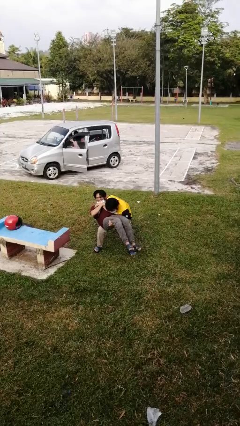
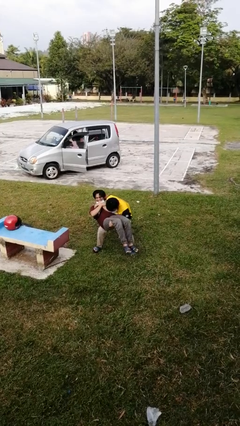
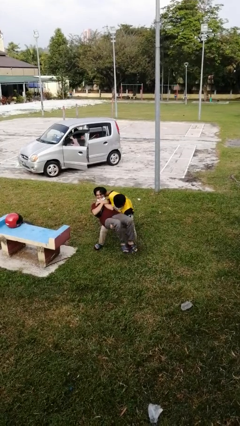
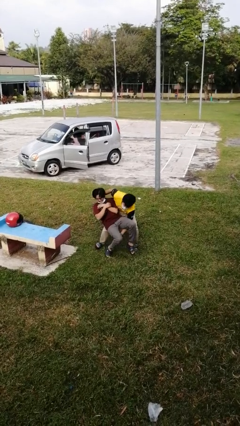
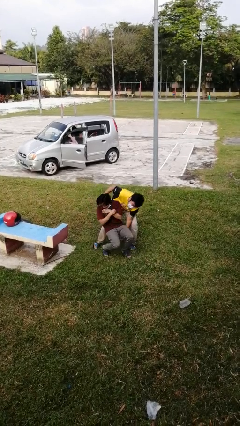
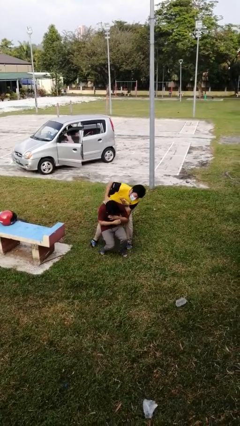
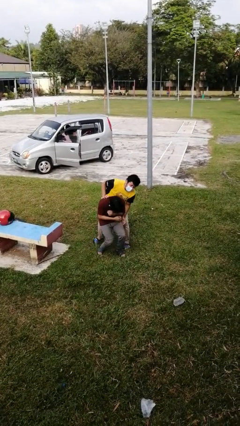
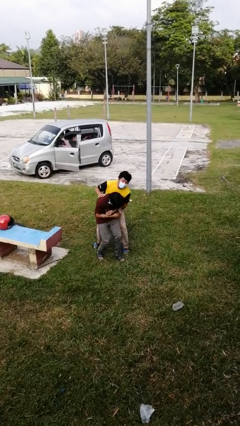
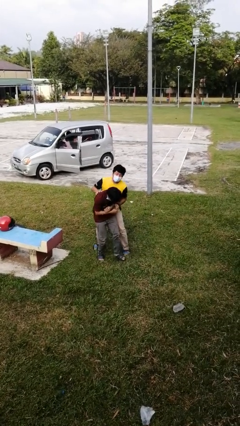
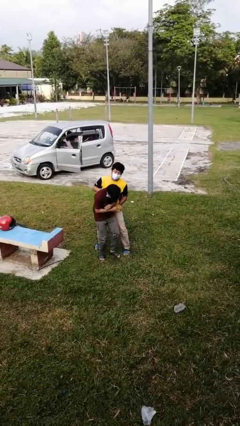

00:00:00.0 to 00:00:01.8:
person puts down person

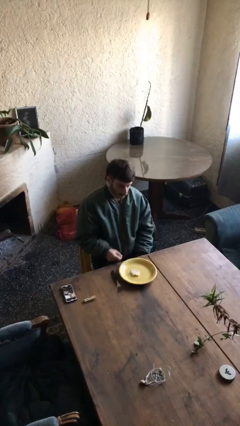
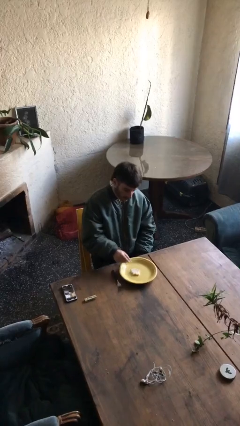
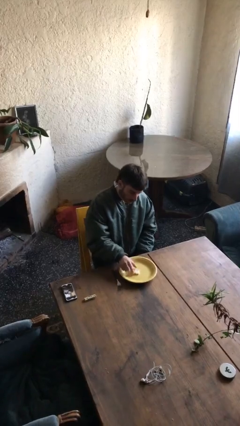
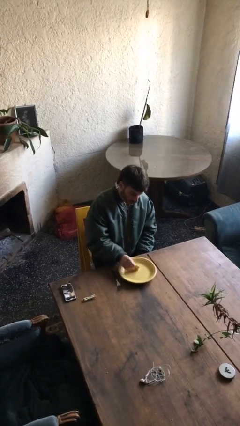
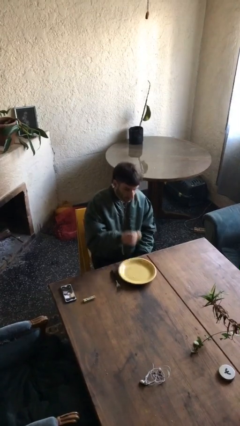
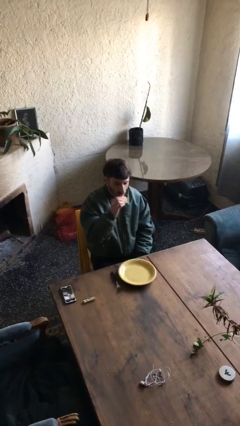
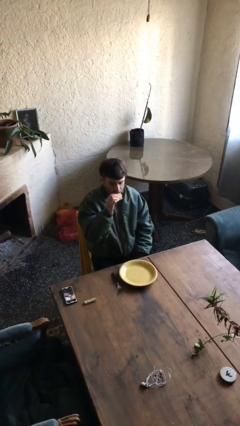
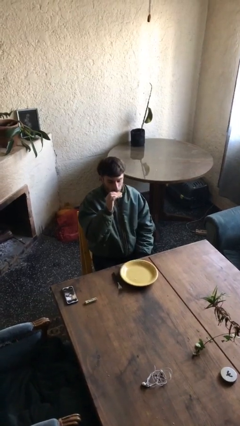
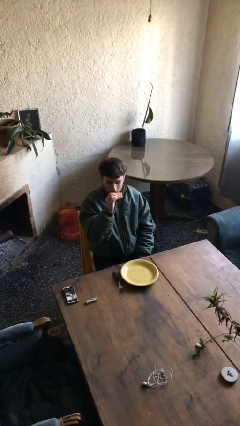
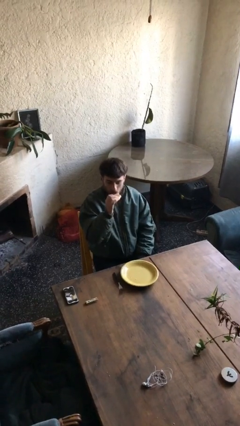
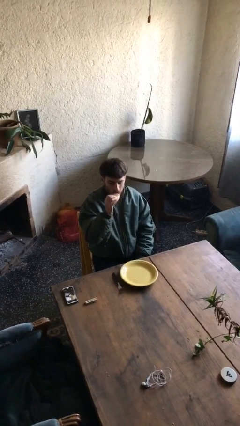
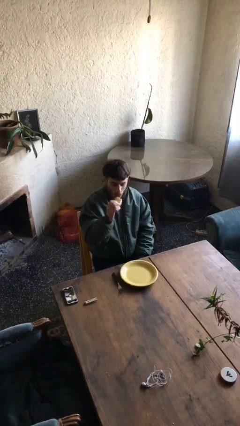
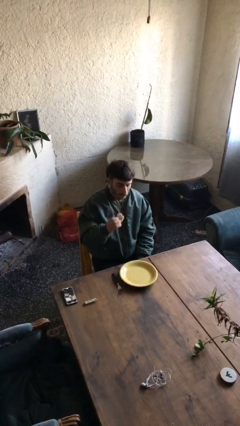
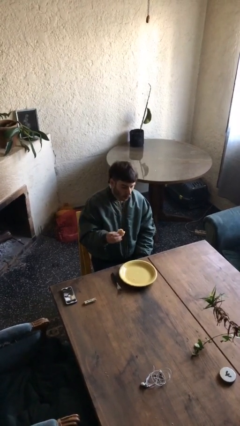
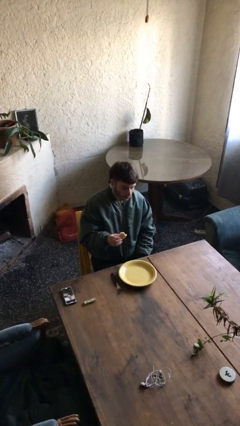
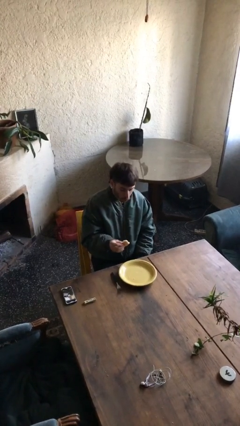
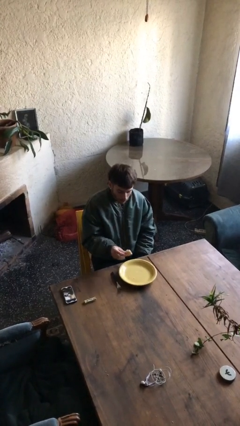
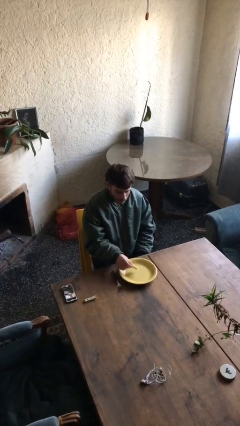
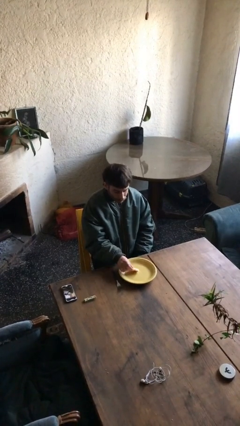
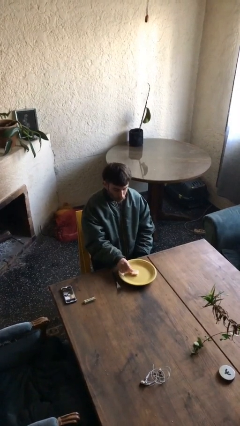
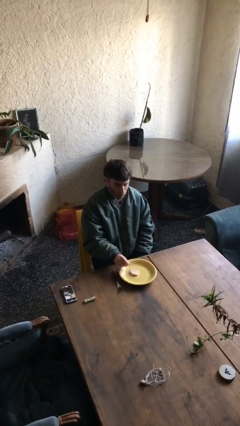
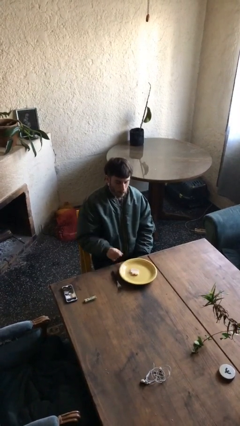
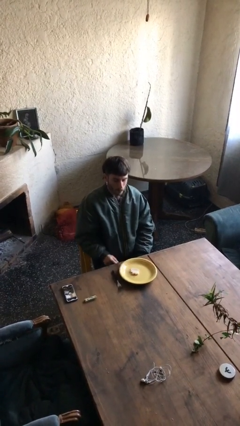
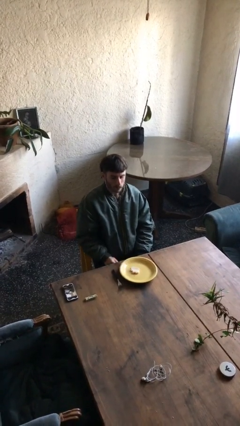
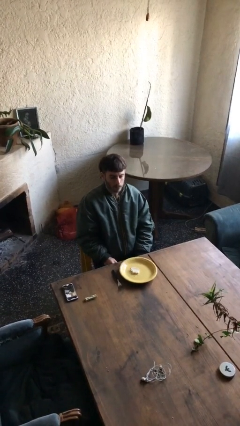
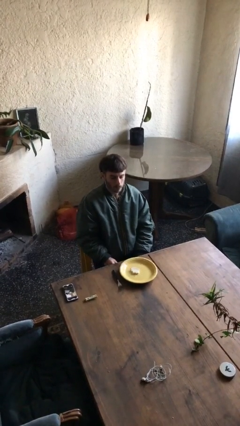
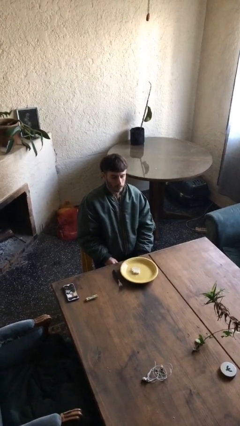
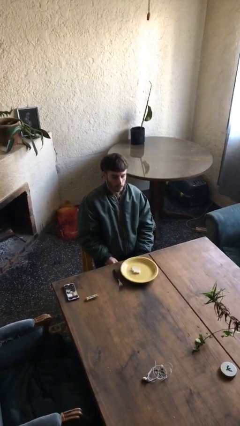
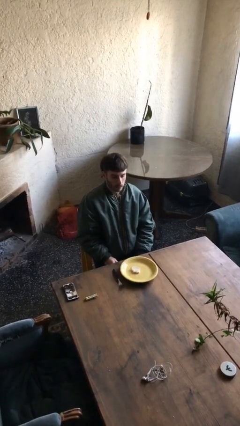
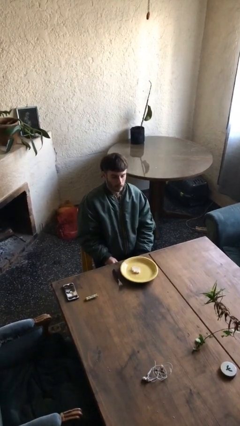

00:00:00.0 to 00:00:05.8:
person eats with hands

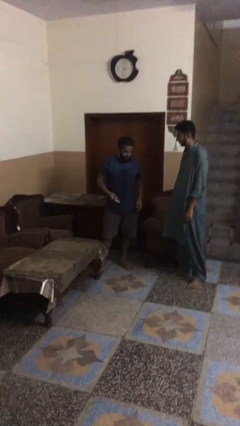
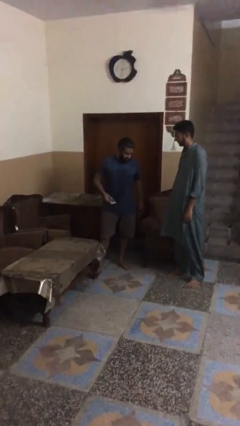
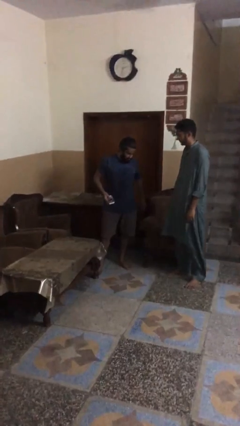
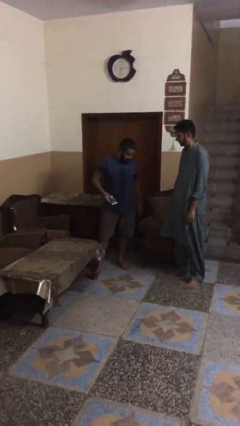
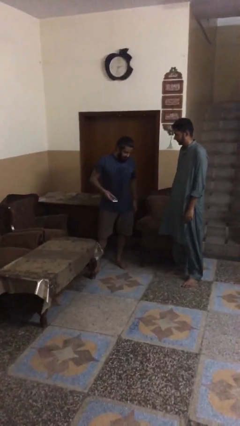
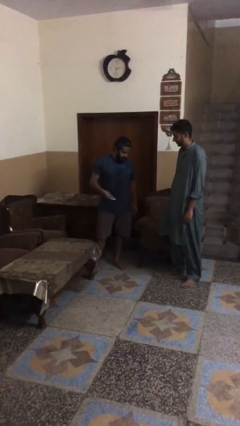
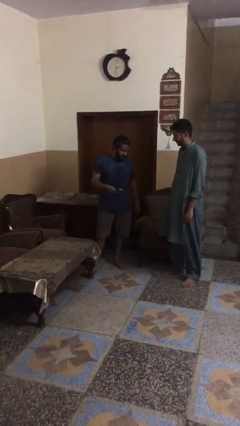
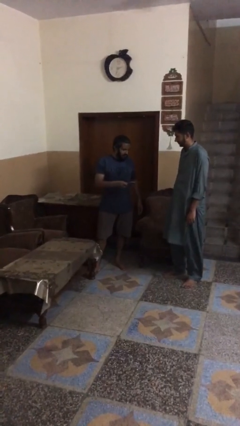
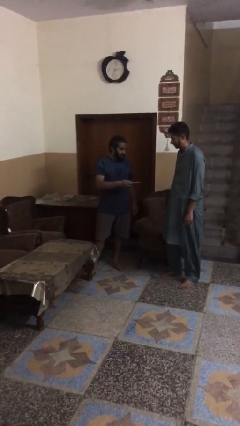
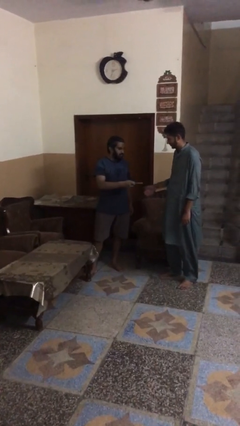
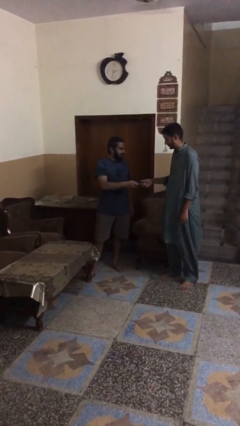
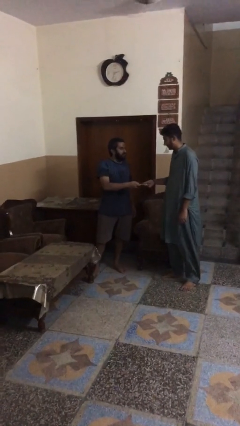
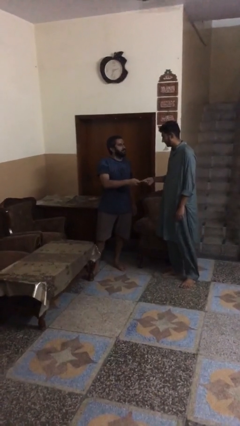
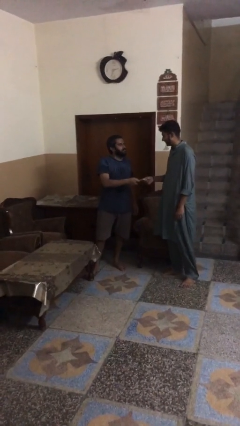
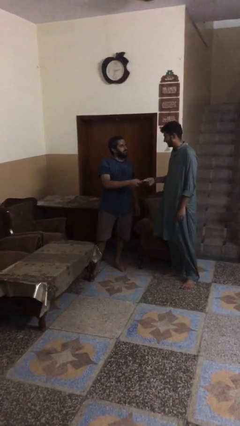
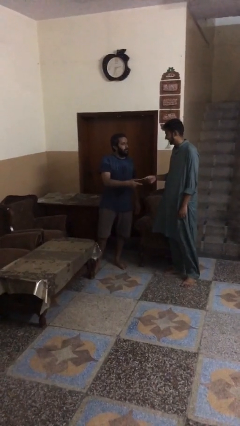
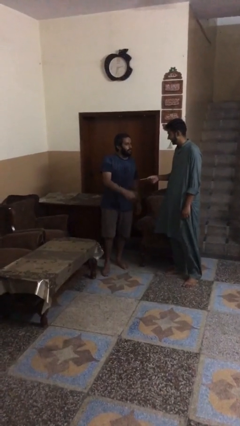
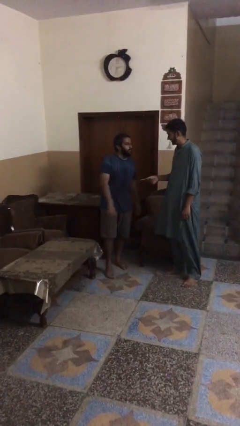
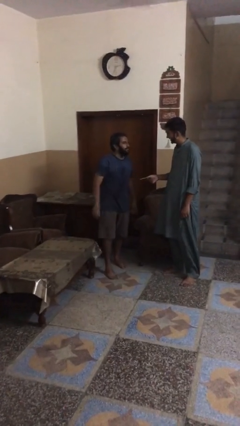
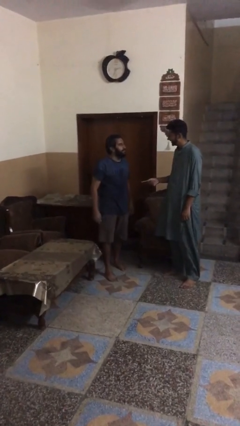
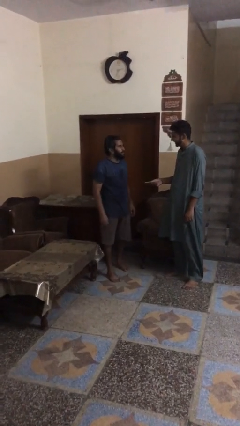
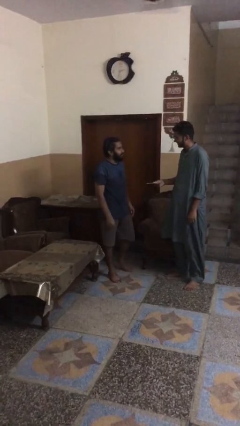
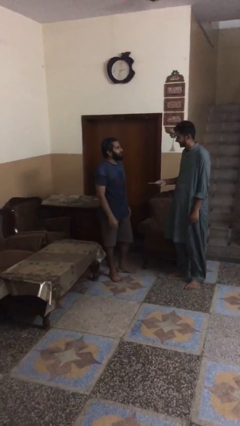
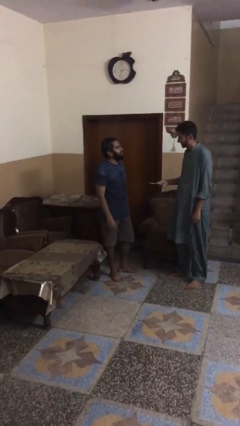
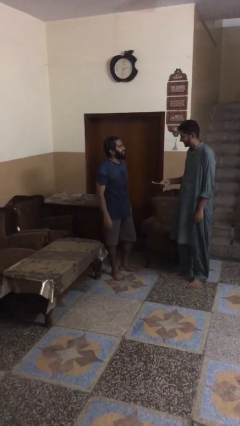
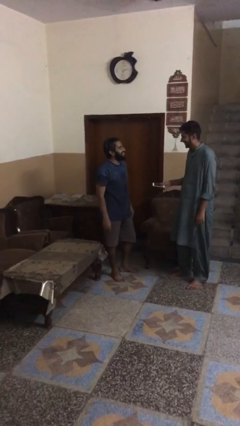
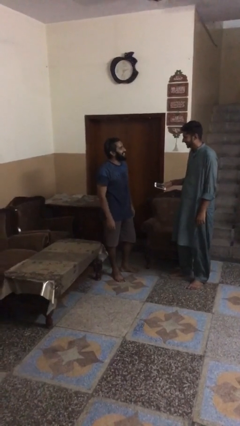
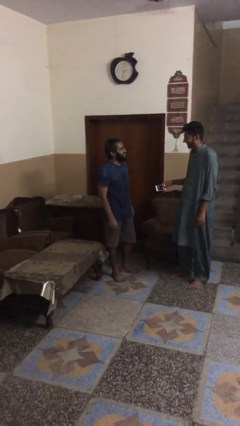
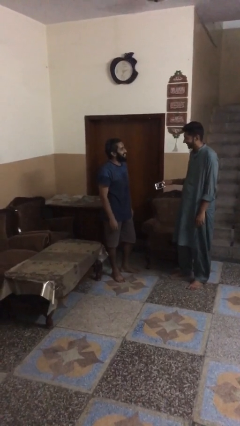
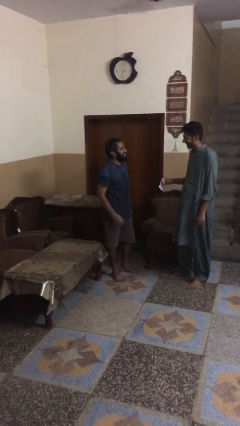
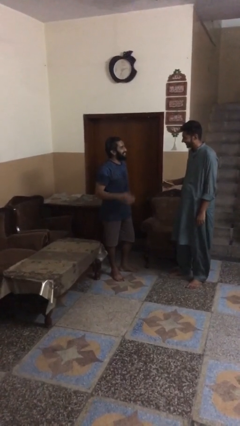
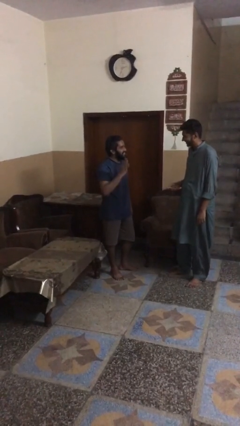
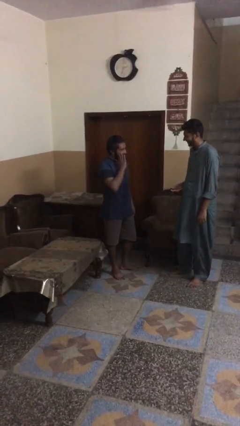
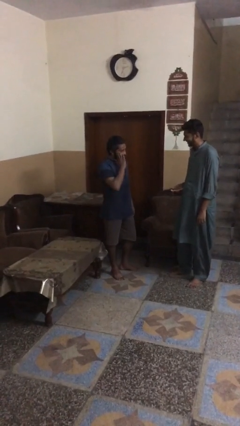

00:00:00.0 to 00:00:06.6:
person transfers object to person

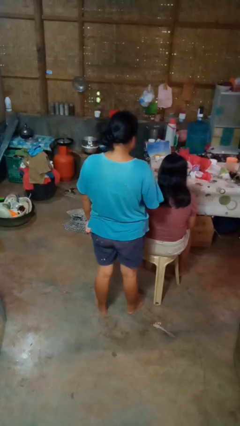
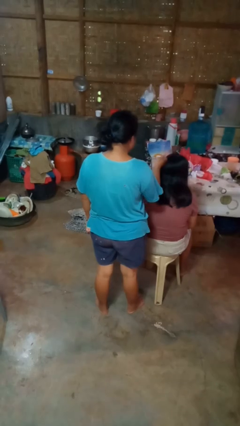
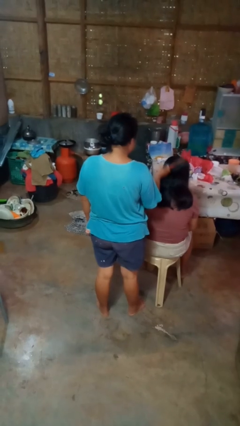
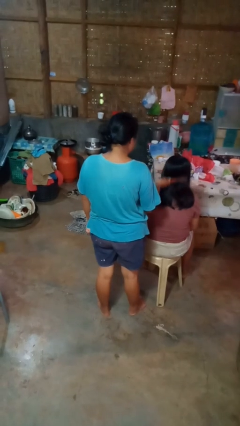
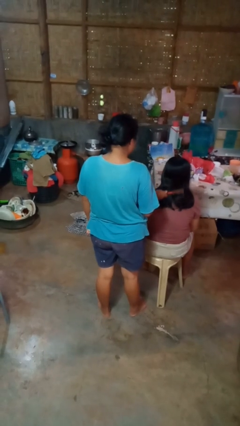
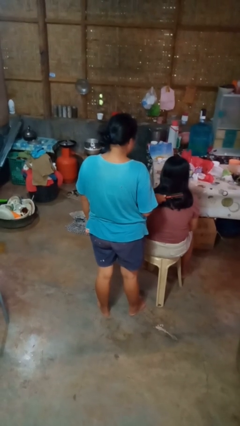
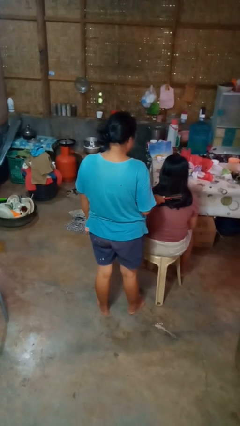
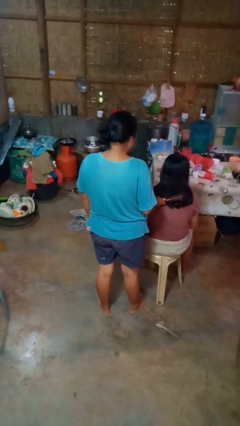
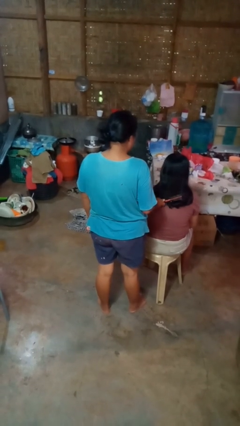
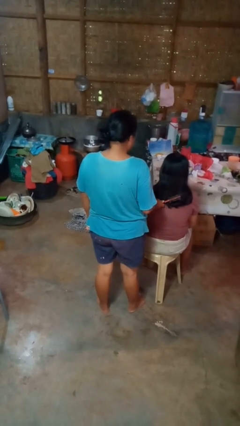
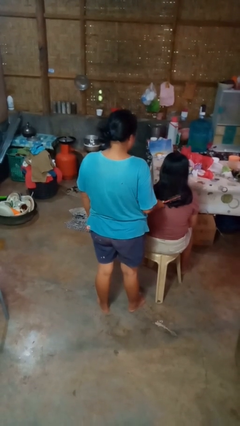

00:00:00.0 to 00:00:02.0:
person brushes hair of person

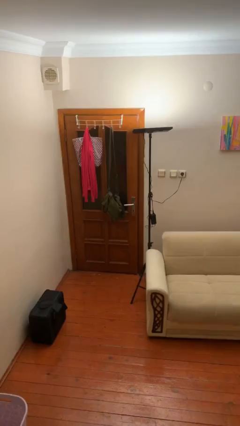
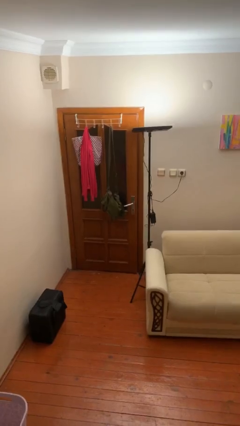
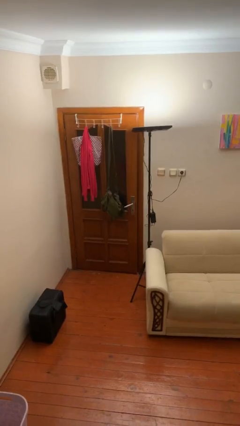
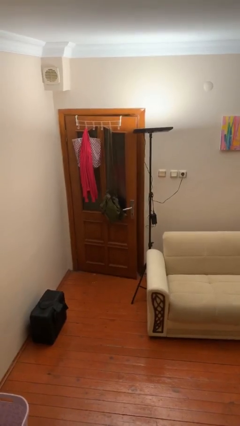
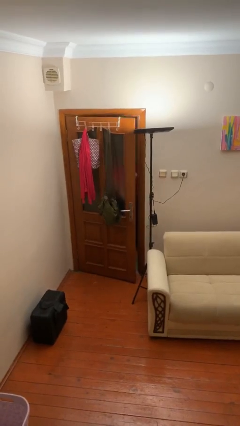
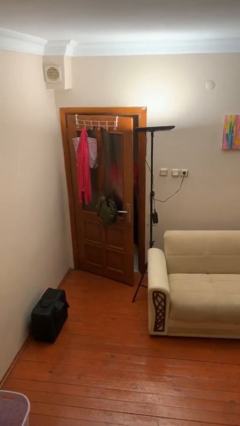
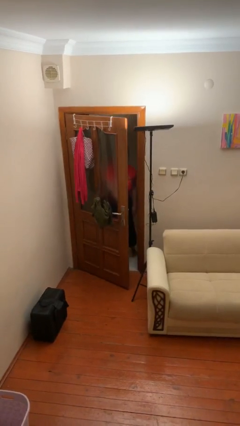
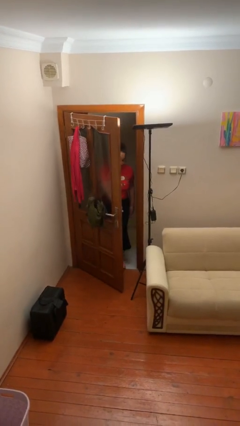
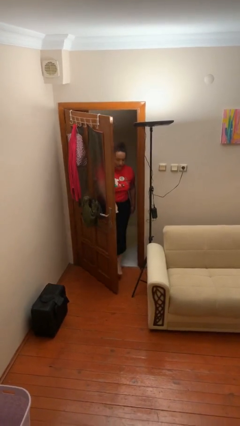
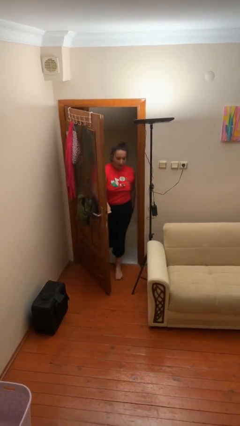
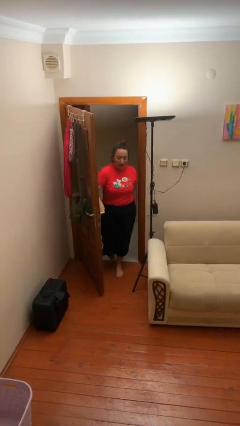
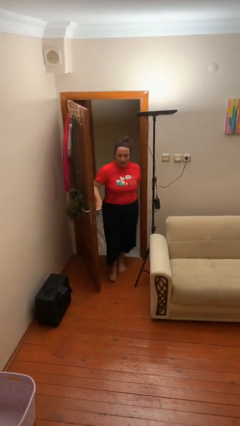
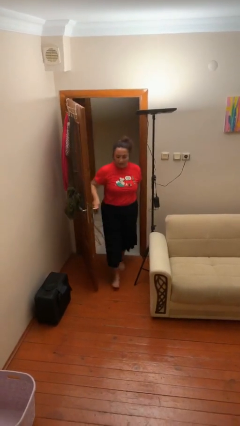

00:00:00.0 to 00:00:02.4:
person opens facility door
